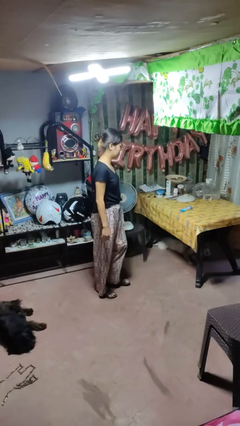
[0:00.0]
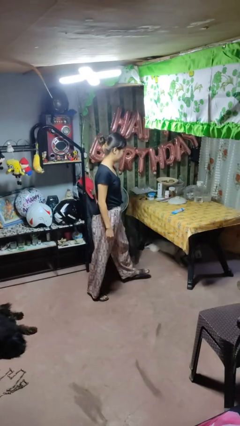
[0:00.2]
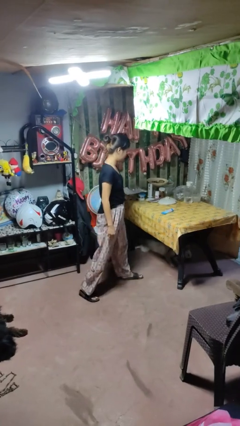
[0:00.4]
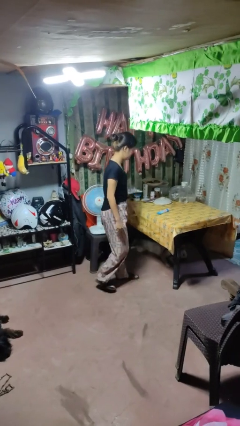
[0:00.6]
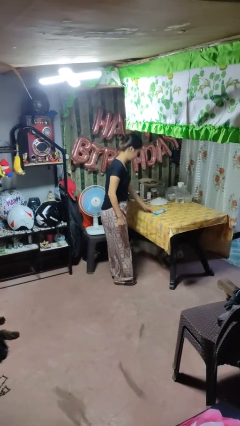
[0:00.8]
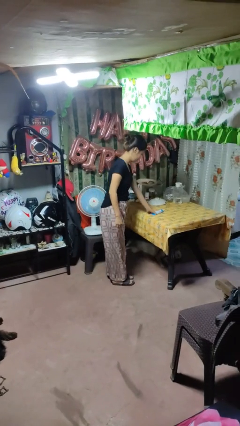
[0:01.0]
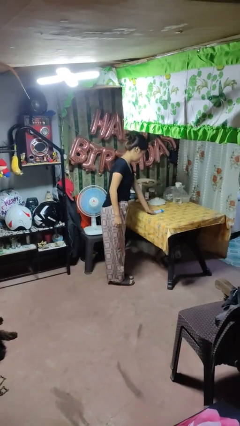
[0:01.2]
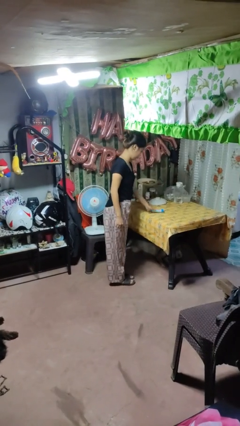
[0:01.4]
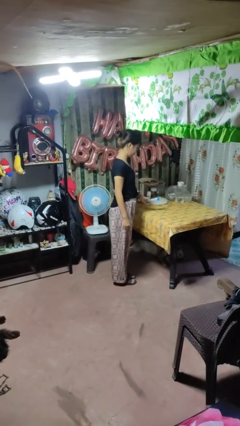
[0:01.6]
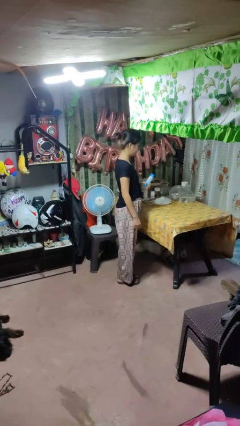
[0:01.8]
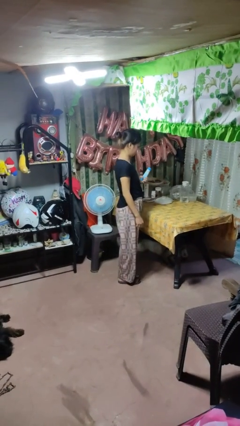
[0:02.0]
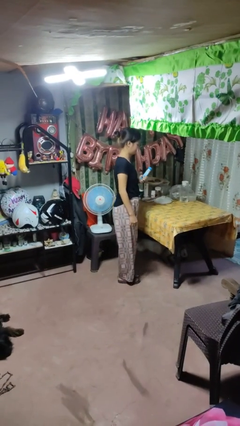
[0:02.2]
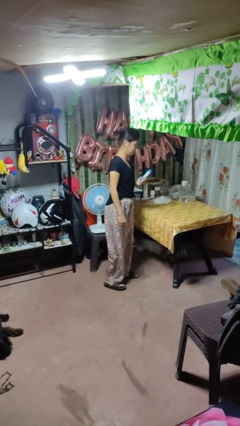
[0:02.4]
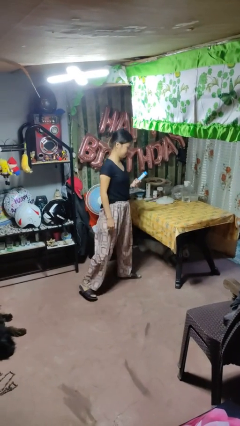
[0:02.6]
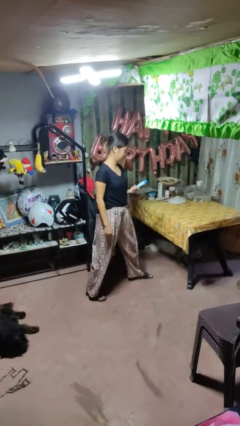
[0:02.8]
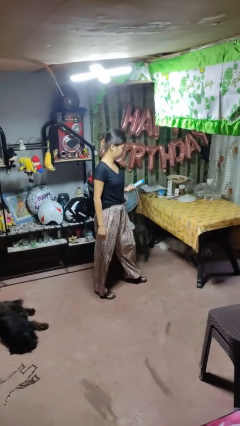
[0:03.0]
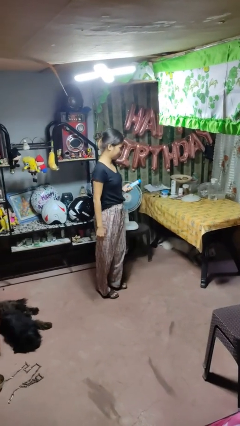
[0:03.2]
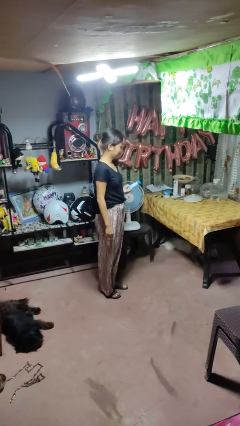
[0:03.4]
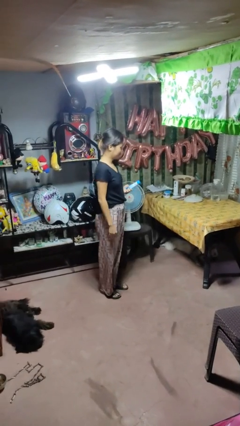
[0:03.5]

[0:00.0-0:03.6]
person picks up object from table

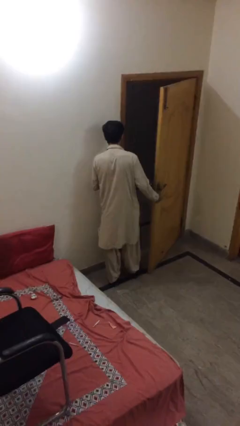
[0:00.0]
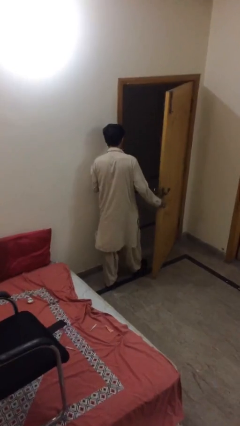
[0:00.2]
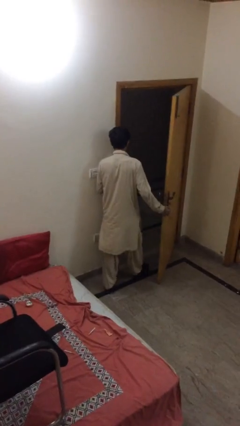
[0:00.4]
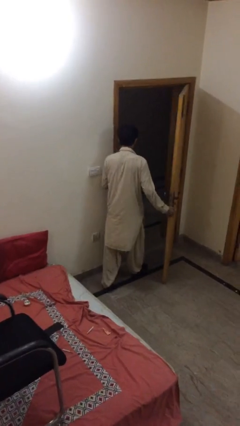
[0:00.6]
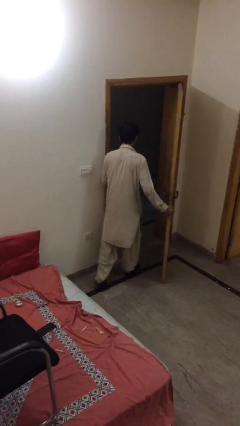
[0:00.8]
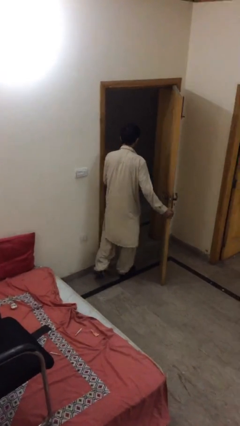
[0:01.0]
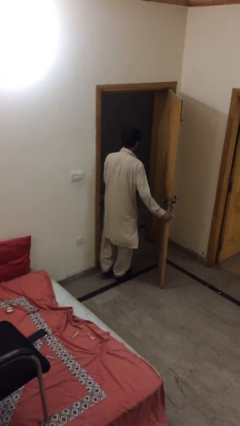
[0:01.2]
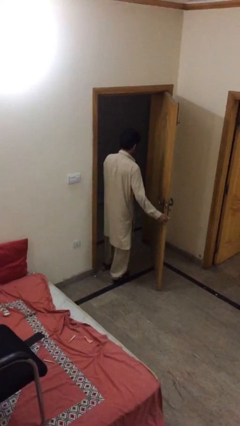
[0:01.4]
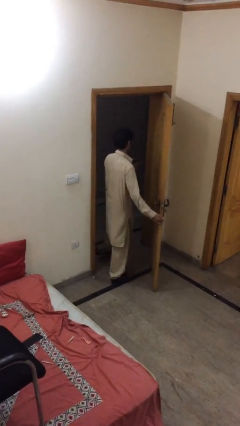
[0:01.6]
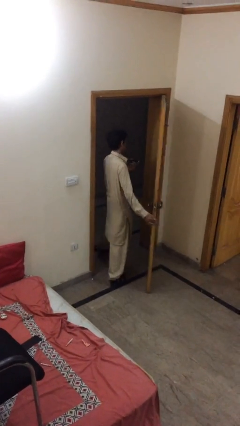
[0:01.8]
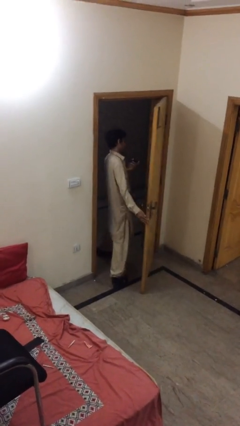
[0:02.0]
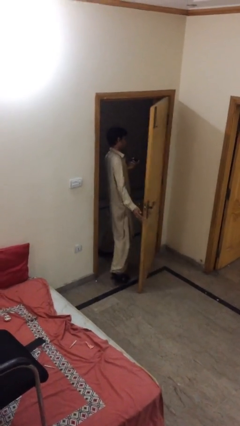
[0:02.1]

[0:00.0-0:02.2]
person exits scene through structure

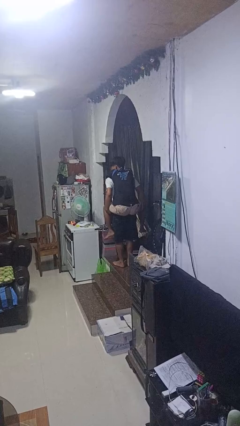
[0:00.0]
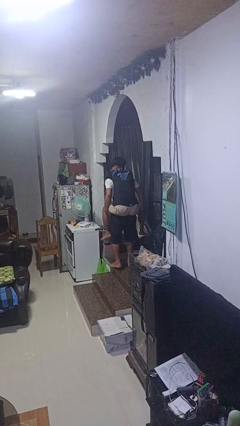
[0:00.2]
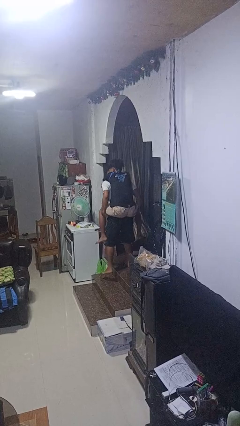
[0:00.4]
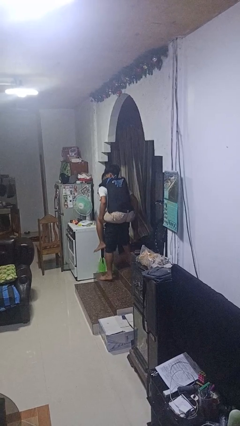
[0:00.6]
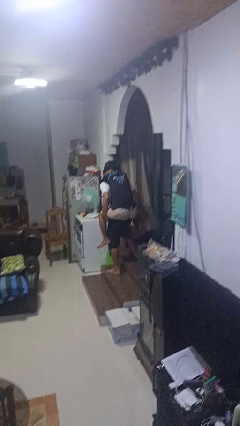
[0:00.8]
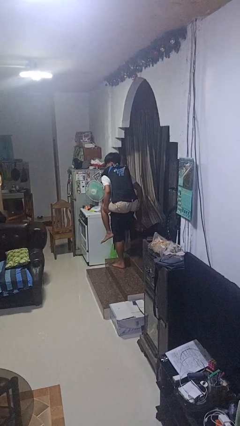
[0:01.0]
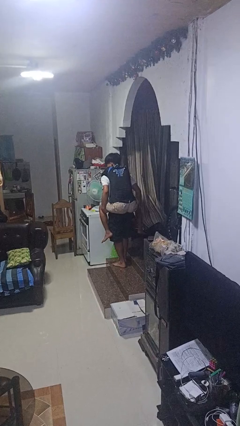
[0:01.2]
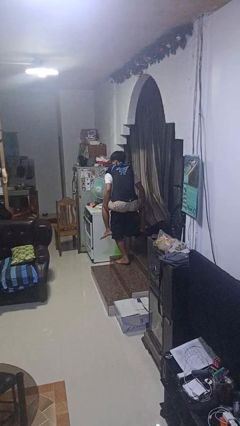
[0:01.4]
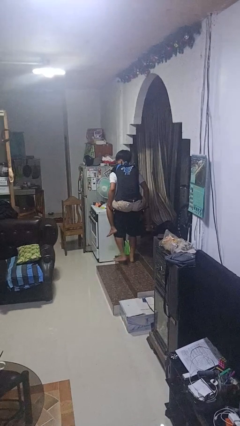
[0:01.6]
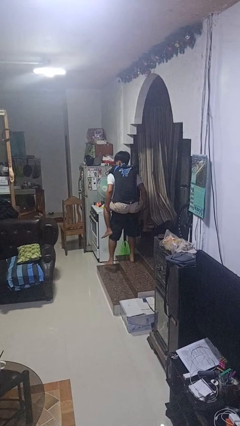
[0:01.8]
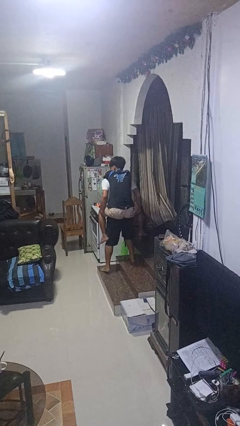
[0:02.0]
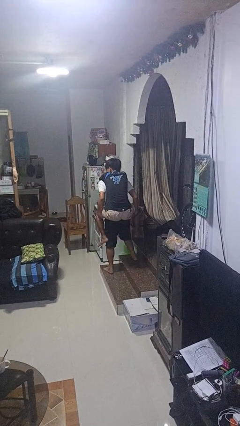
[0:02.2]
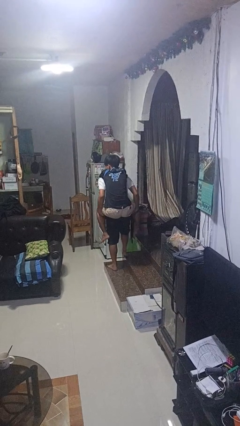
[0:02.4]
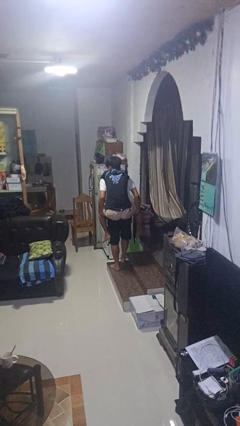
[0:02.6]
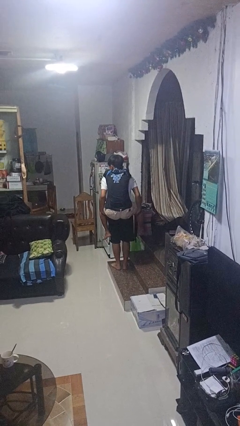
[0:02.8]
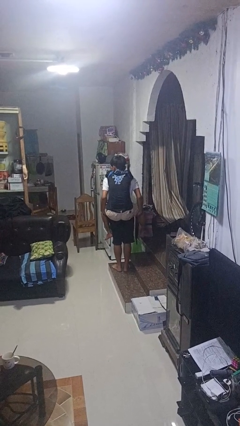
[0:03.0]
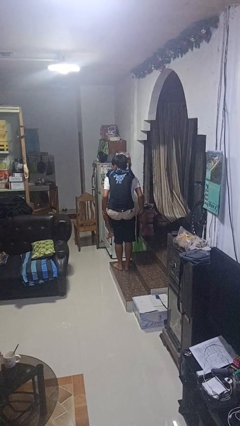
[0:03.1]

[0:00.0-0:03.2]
person carries person on back

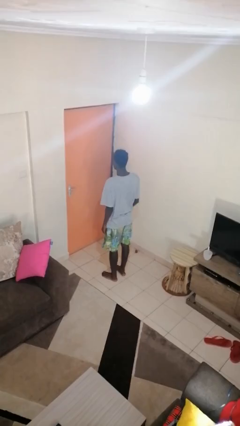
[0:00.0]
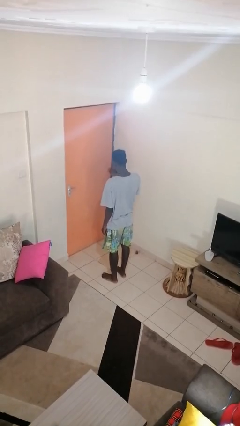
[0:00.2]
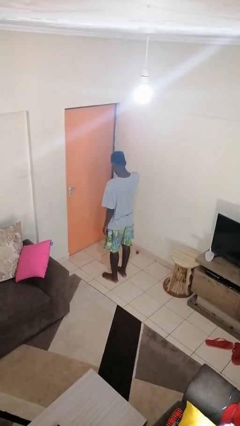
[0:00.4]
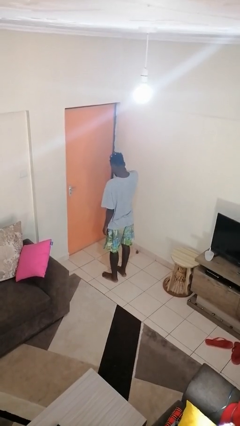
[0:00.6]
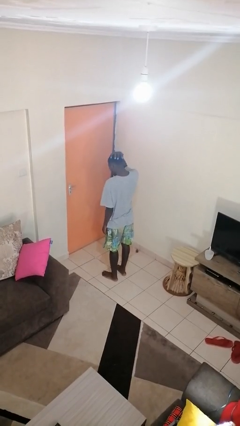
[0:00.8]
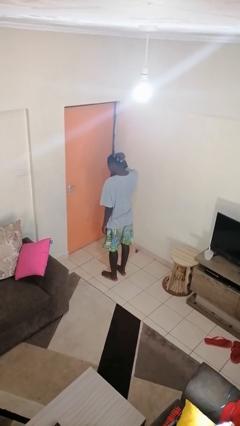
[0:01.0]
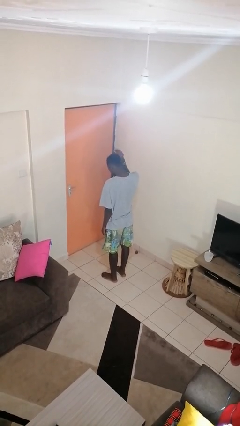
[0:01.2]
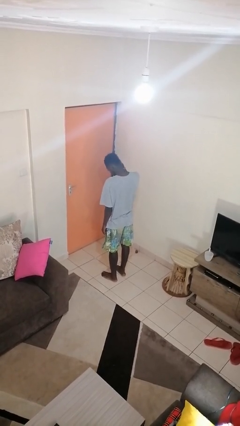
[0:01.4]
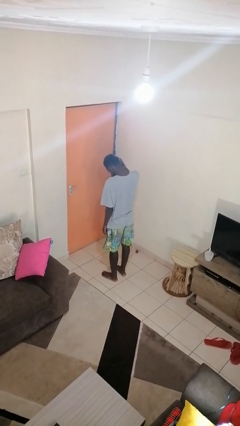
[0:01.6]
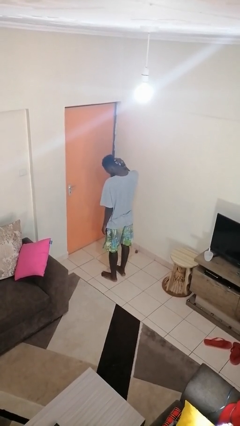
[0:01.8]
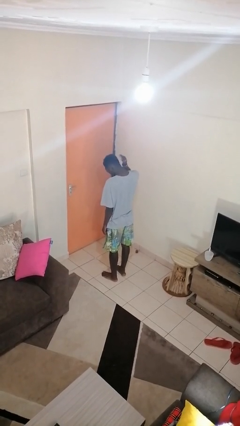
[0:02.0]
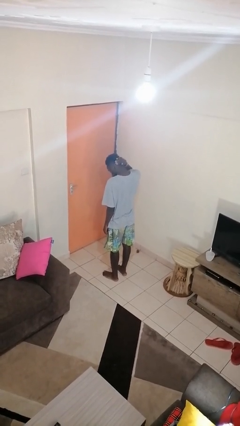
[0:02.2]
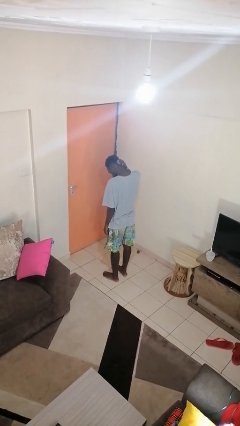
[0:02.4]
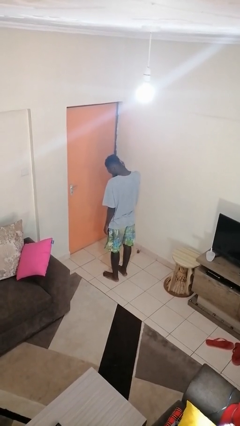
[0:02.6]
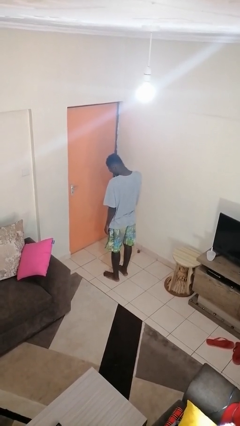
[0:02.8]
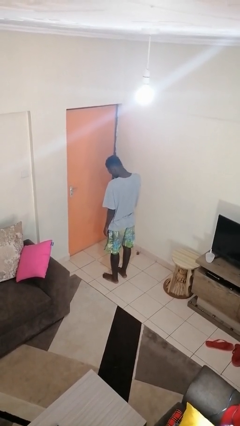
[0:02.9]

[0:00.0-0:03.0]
person strokes hair

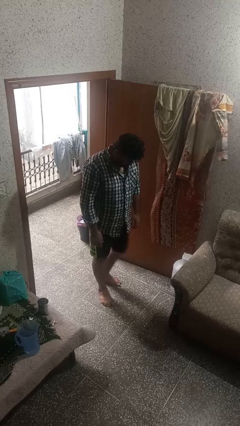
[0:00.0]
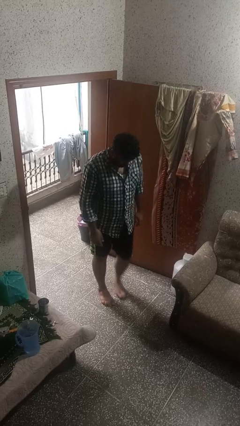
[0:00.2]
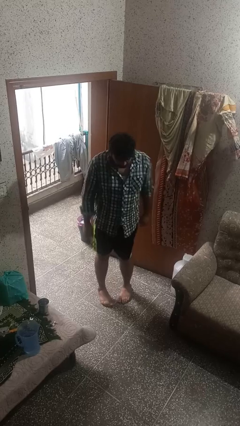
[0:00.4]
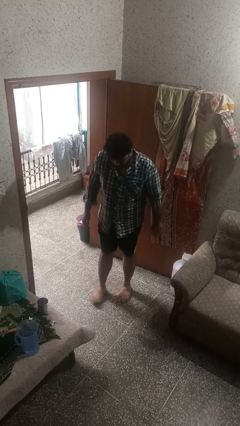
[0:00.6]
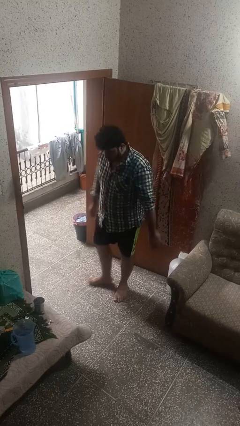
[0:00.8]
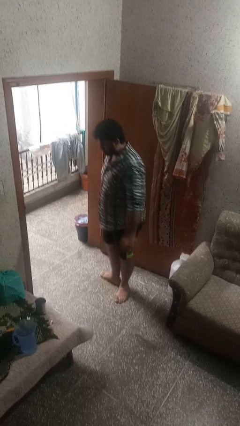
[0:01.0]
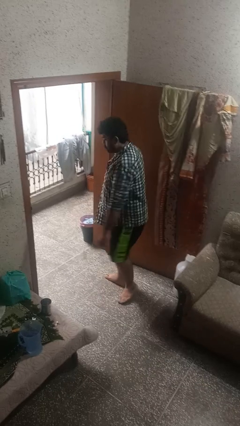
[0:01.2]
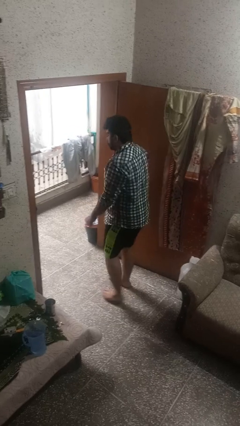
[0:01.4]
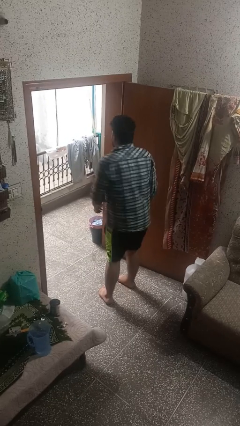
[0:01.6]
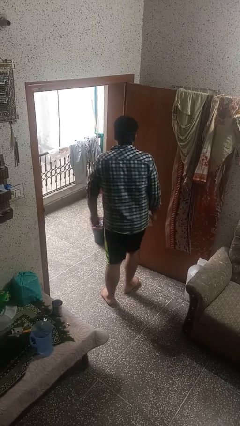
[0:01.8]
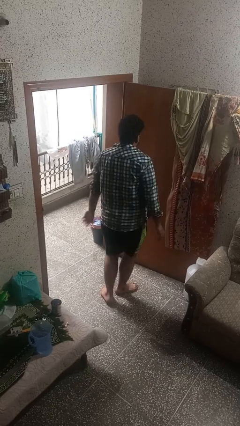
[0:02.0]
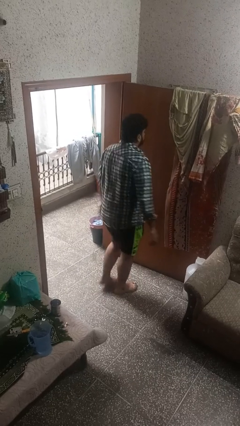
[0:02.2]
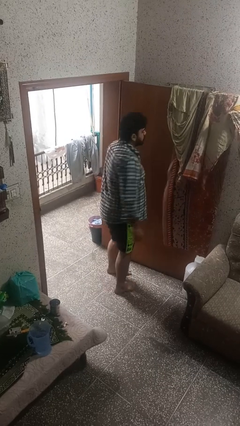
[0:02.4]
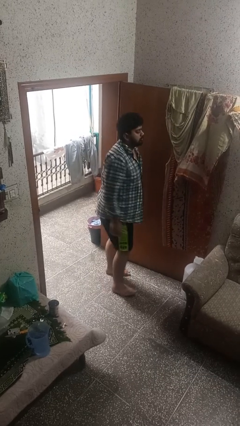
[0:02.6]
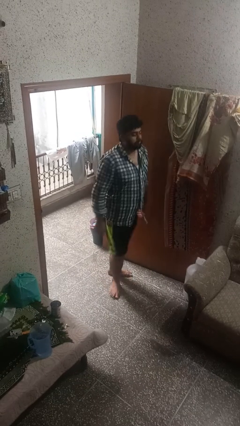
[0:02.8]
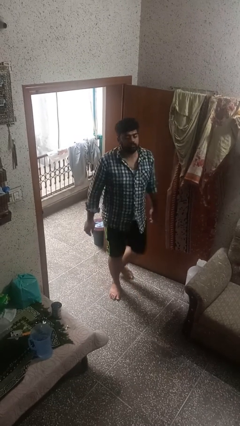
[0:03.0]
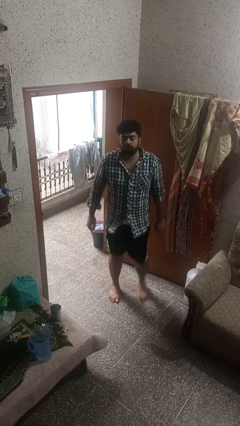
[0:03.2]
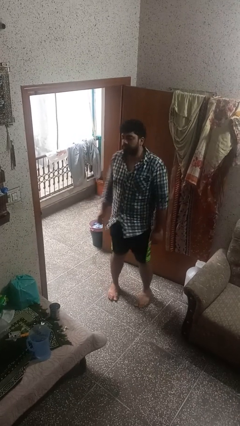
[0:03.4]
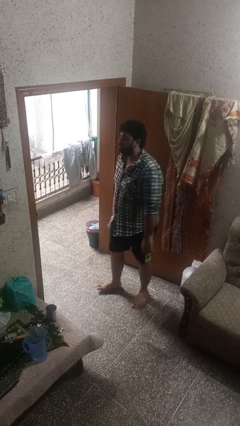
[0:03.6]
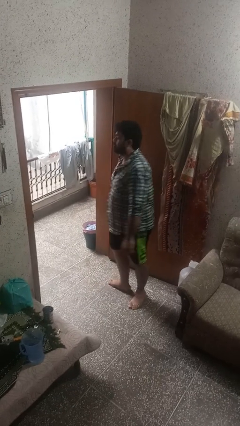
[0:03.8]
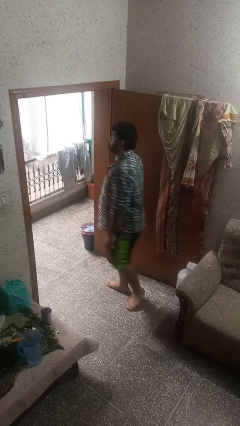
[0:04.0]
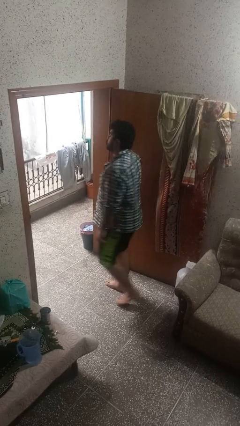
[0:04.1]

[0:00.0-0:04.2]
person twirls

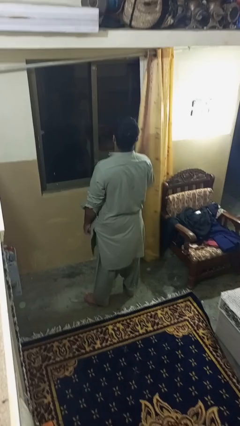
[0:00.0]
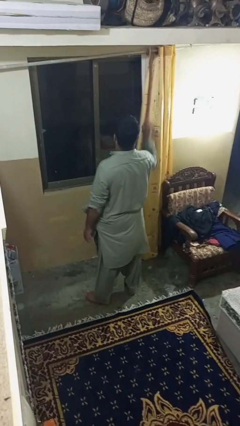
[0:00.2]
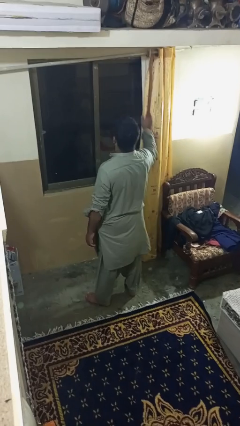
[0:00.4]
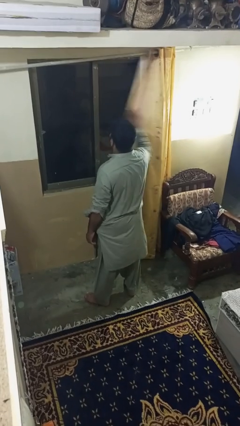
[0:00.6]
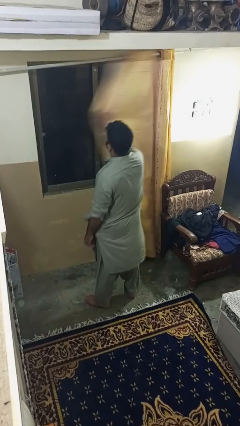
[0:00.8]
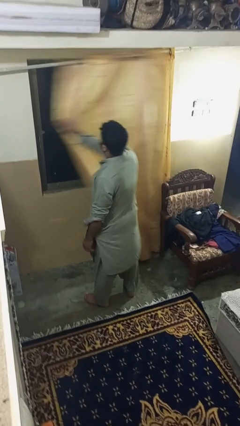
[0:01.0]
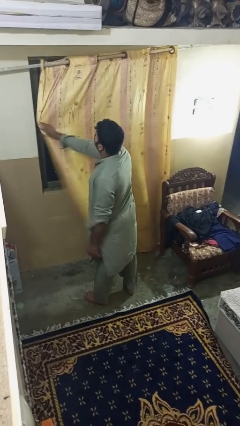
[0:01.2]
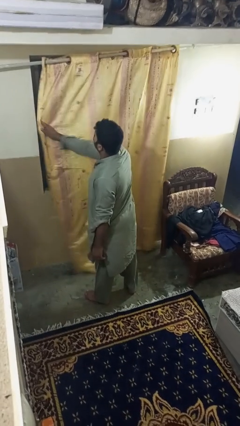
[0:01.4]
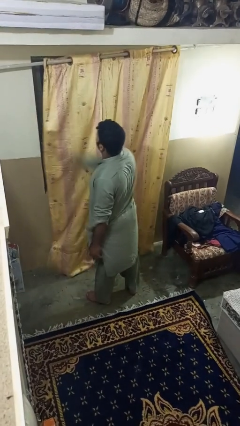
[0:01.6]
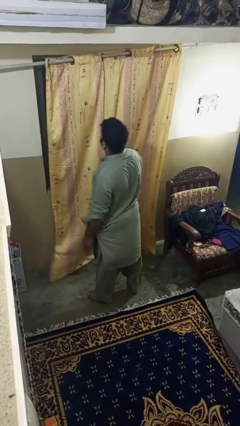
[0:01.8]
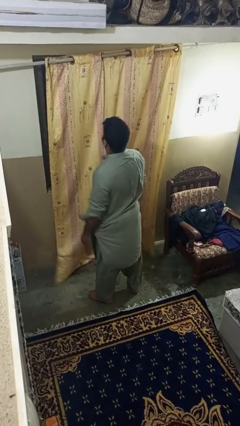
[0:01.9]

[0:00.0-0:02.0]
person closes curtains
